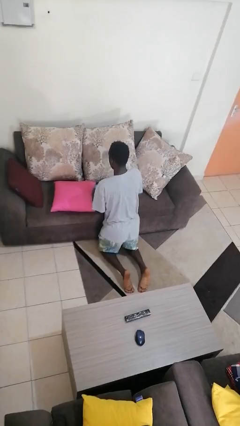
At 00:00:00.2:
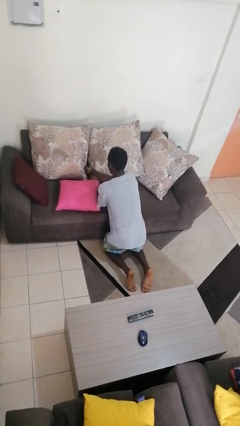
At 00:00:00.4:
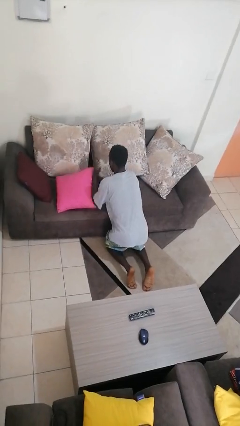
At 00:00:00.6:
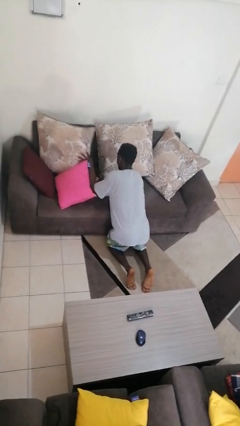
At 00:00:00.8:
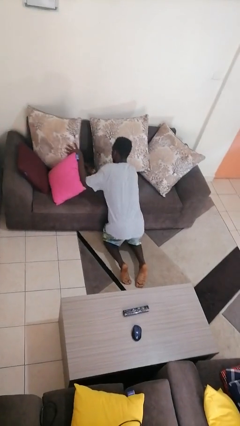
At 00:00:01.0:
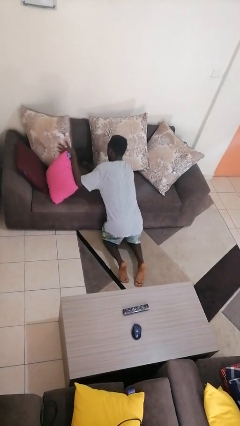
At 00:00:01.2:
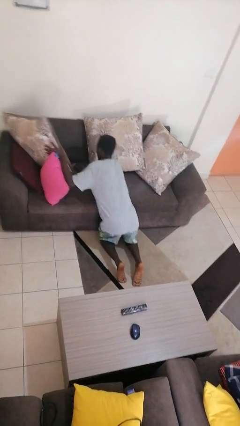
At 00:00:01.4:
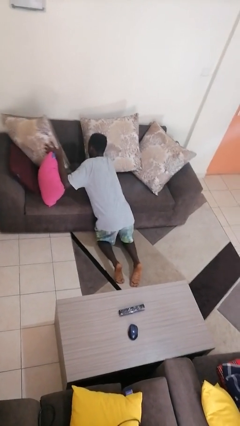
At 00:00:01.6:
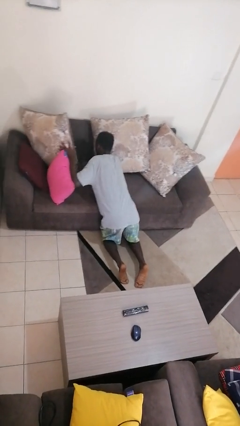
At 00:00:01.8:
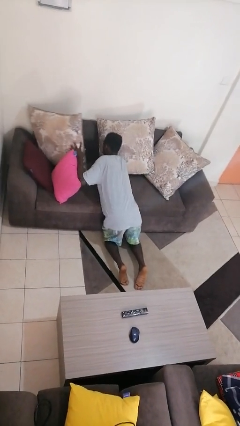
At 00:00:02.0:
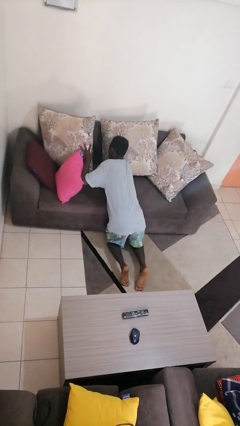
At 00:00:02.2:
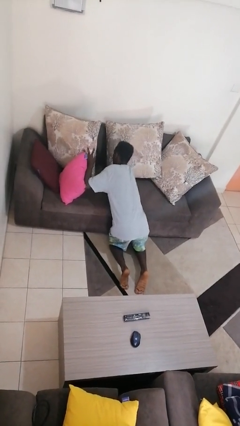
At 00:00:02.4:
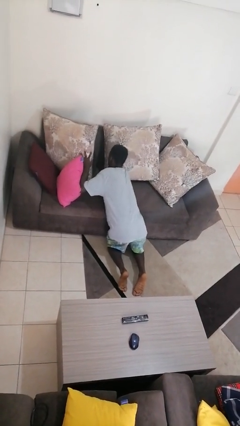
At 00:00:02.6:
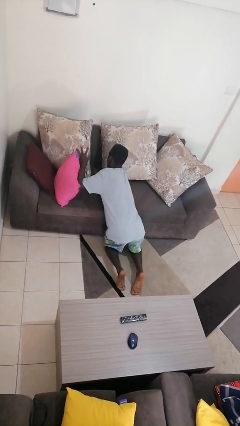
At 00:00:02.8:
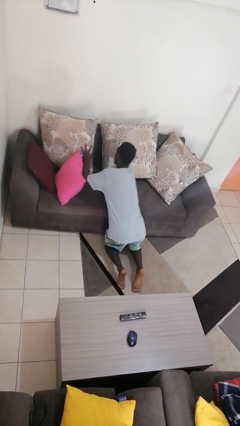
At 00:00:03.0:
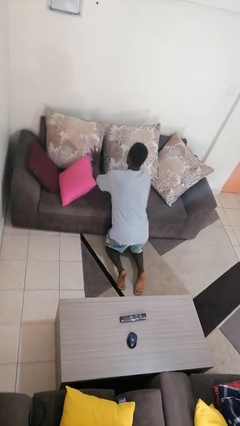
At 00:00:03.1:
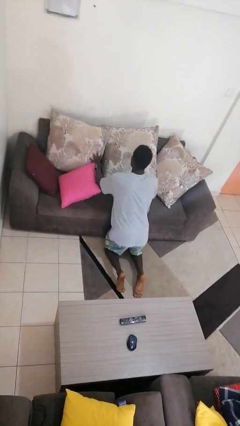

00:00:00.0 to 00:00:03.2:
person searches in couch

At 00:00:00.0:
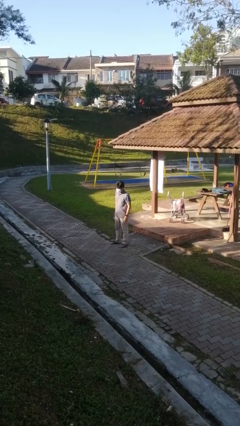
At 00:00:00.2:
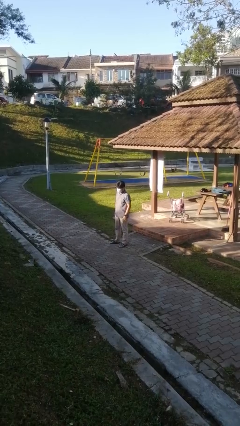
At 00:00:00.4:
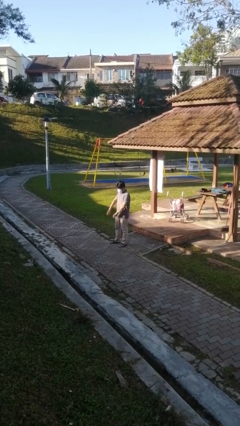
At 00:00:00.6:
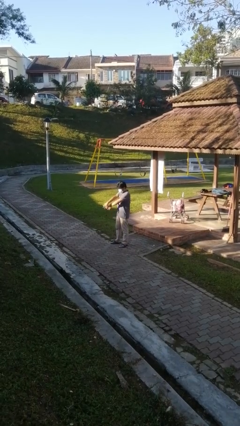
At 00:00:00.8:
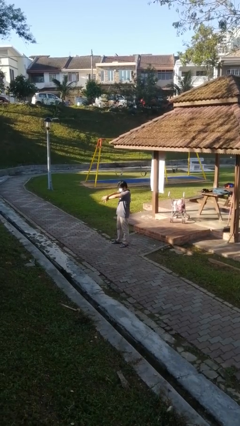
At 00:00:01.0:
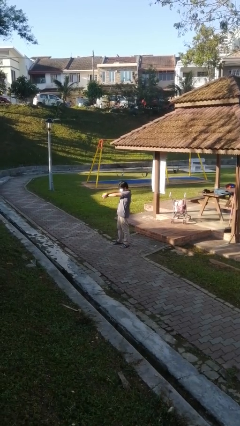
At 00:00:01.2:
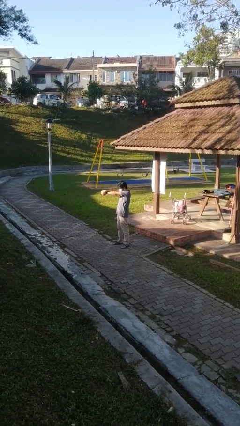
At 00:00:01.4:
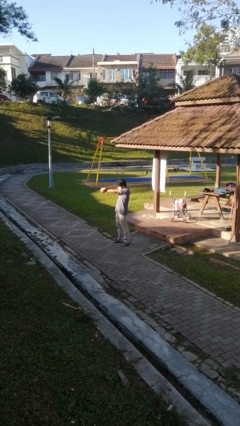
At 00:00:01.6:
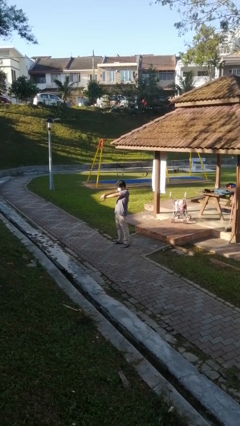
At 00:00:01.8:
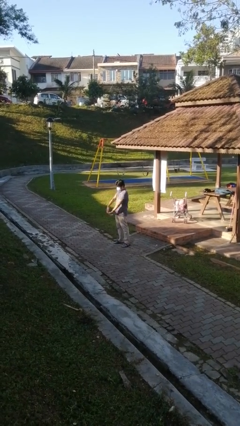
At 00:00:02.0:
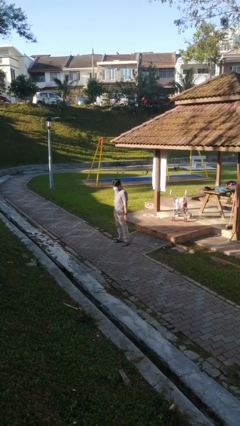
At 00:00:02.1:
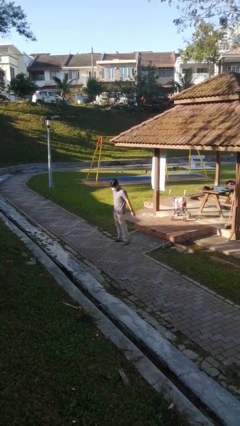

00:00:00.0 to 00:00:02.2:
person crosses arms

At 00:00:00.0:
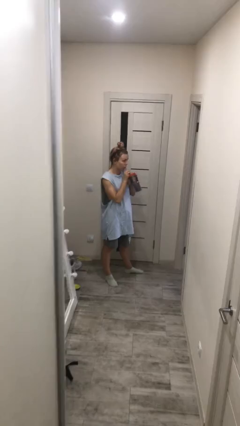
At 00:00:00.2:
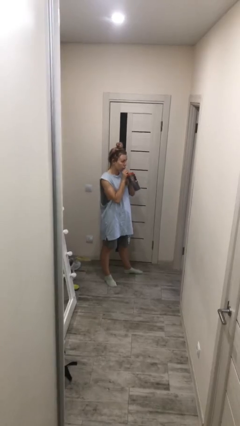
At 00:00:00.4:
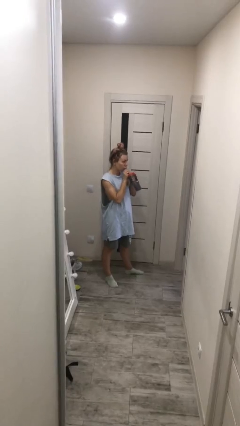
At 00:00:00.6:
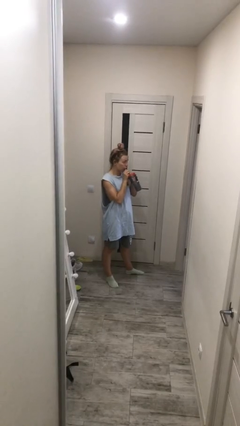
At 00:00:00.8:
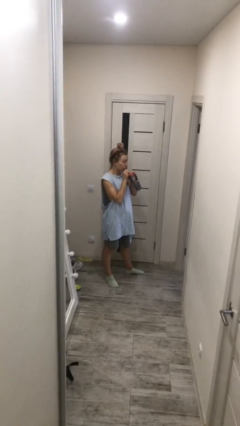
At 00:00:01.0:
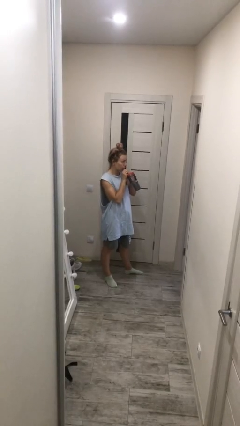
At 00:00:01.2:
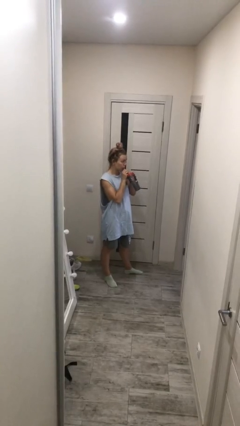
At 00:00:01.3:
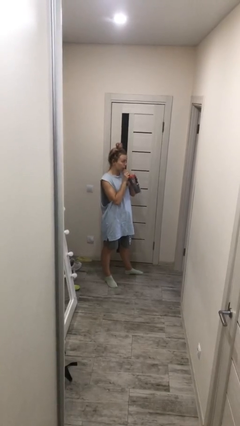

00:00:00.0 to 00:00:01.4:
person drinks from straw

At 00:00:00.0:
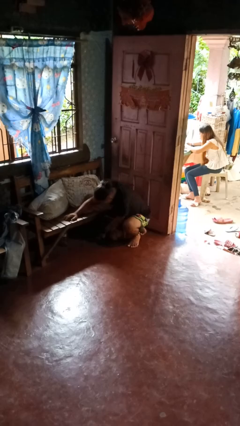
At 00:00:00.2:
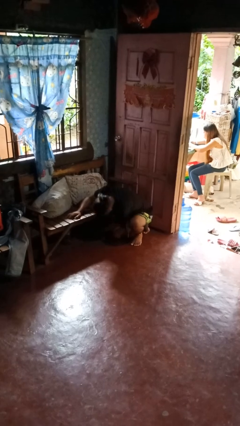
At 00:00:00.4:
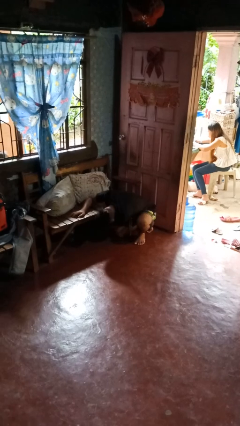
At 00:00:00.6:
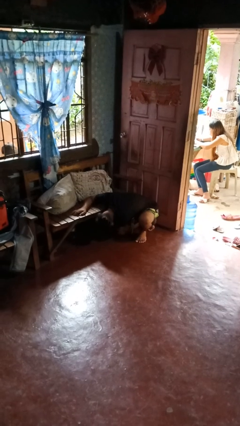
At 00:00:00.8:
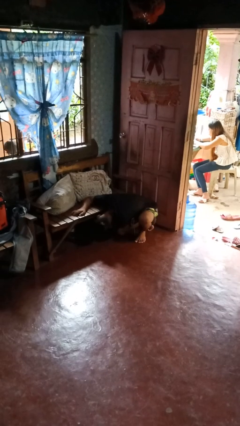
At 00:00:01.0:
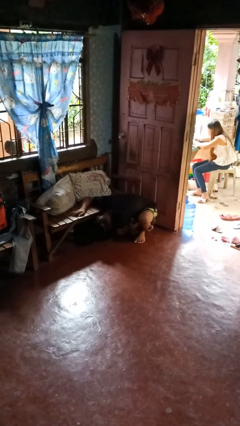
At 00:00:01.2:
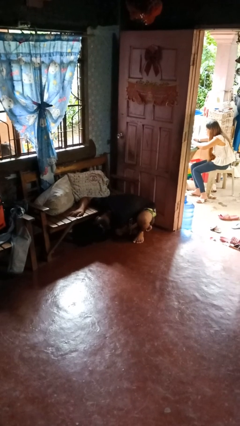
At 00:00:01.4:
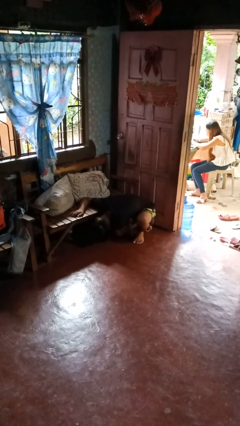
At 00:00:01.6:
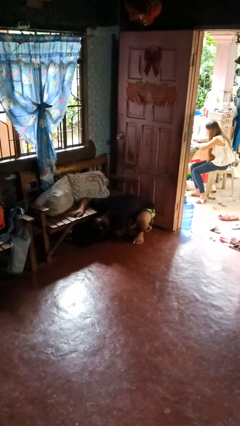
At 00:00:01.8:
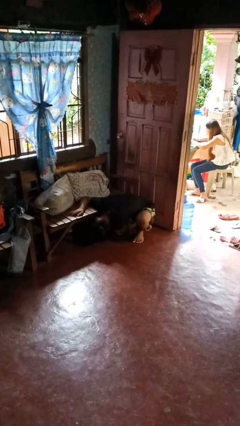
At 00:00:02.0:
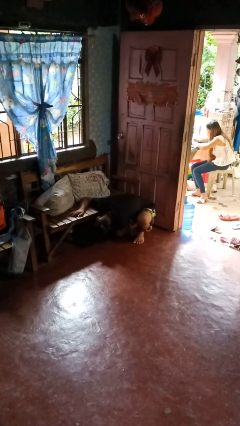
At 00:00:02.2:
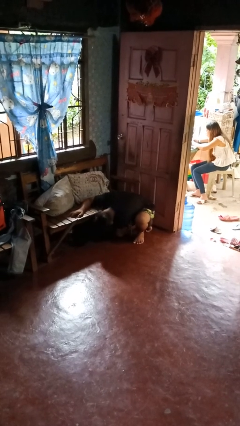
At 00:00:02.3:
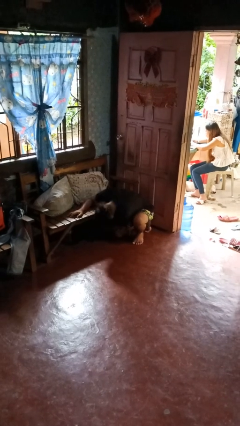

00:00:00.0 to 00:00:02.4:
person searches under couch

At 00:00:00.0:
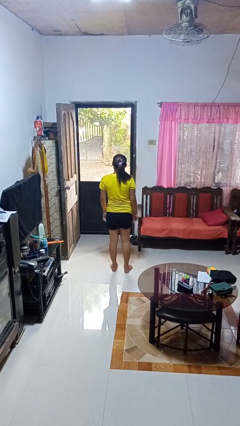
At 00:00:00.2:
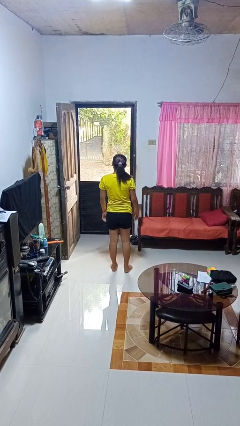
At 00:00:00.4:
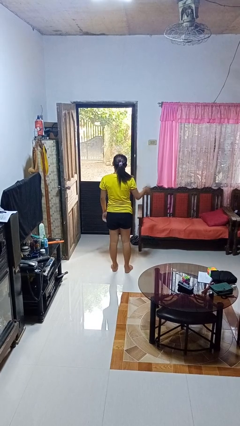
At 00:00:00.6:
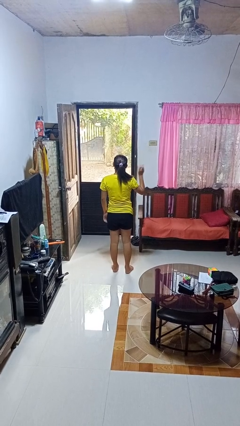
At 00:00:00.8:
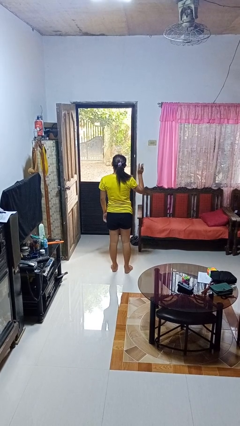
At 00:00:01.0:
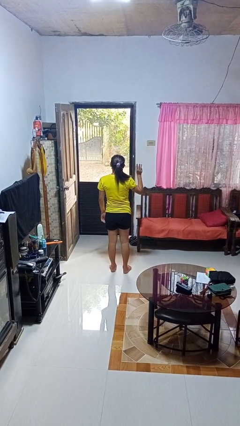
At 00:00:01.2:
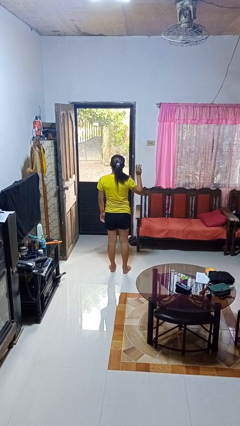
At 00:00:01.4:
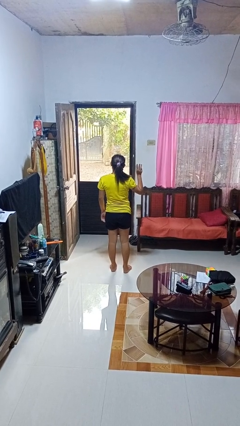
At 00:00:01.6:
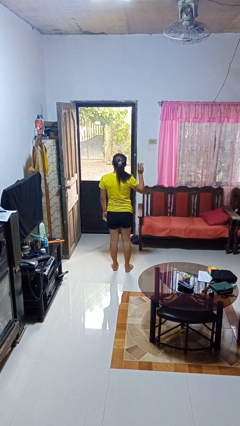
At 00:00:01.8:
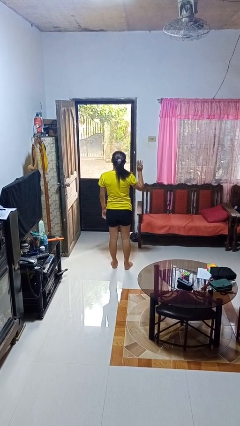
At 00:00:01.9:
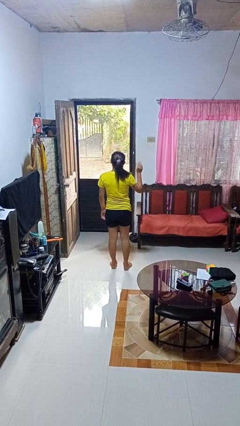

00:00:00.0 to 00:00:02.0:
person gestures number three

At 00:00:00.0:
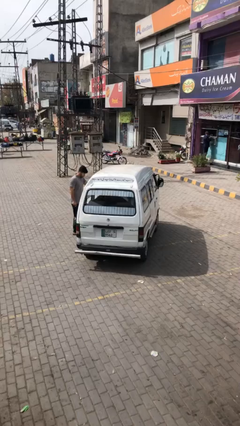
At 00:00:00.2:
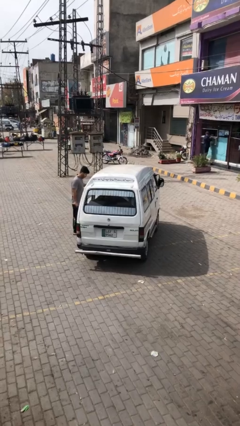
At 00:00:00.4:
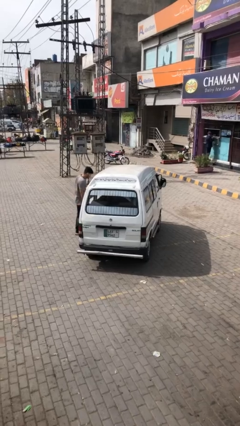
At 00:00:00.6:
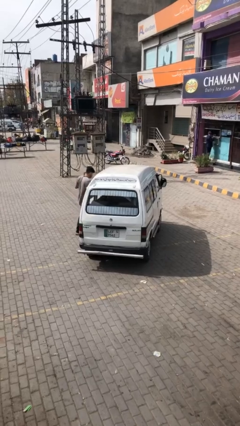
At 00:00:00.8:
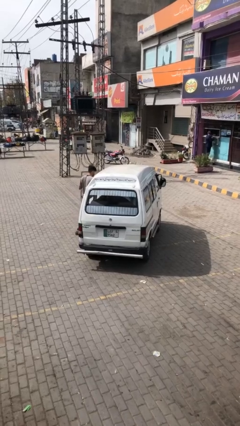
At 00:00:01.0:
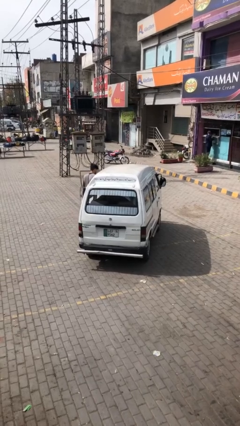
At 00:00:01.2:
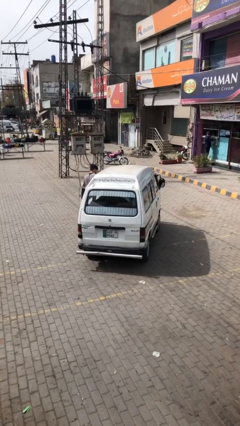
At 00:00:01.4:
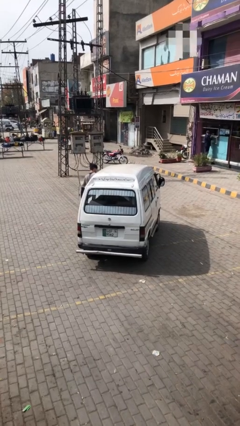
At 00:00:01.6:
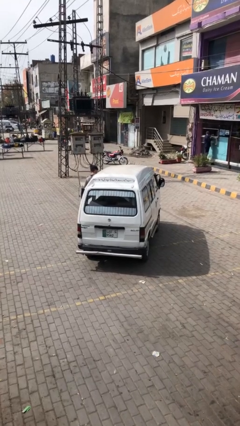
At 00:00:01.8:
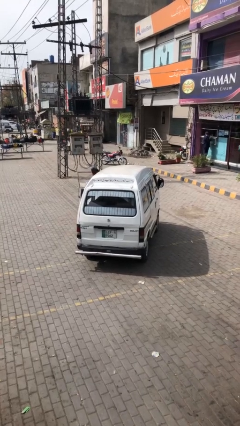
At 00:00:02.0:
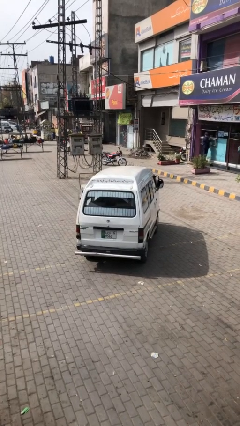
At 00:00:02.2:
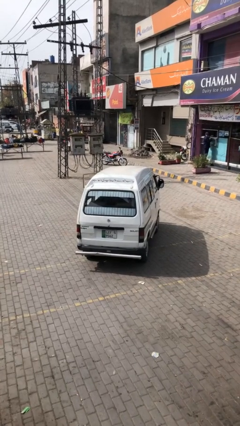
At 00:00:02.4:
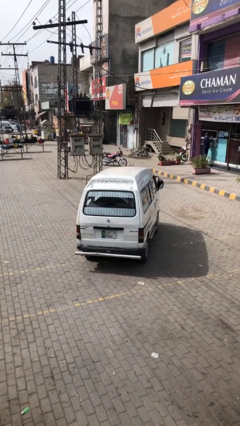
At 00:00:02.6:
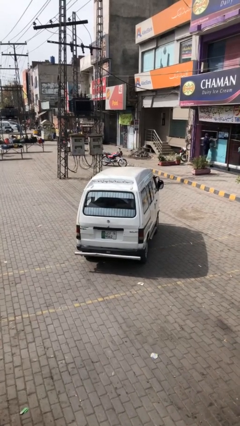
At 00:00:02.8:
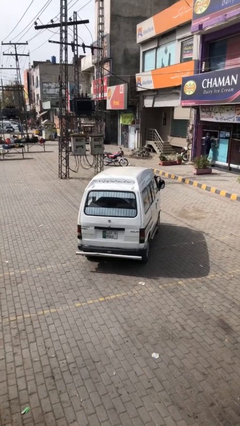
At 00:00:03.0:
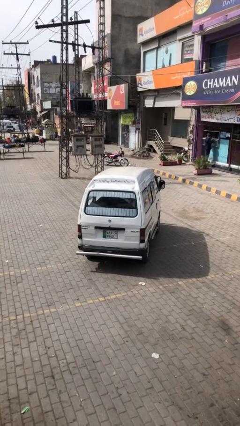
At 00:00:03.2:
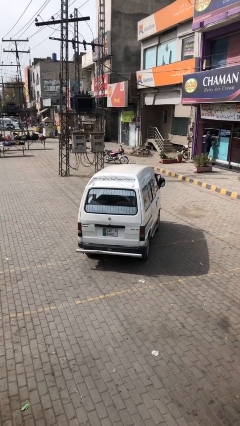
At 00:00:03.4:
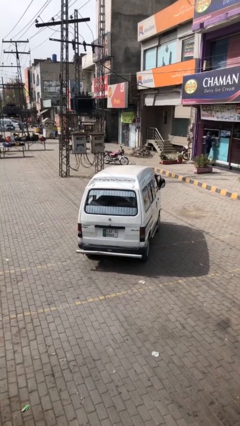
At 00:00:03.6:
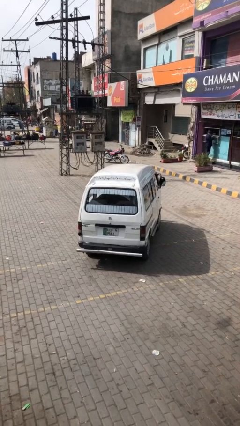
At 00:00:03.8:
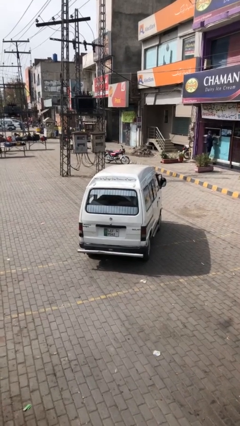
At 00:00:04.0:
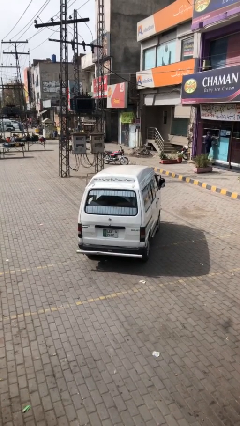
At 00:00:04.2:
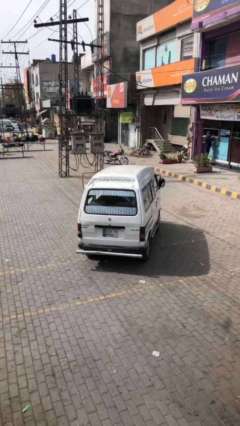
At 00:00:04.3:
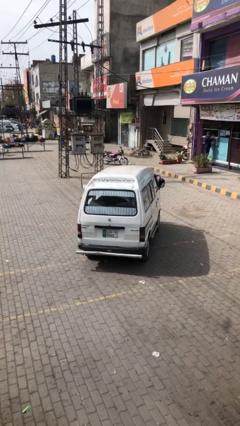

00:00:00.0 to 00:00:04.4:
car picks up person

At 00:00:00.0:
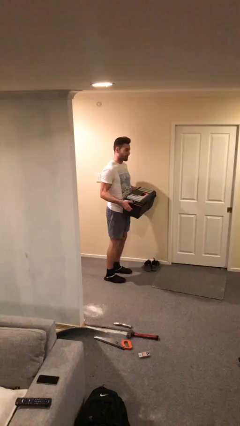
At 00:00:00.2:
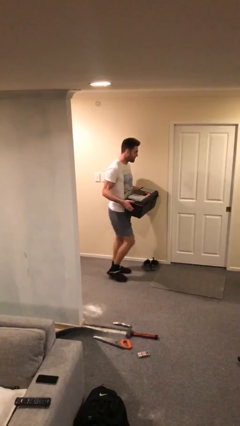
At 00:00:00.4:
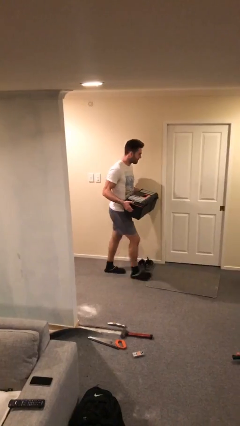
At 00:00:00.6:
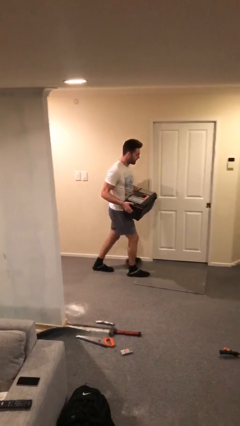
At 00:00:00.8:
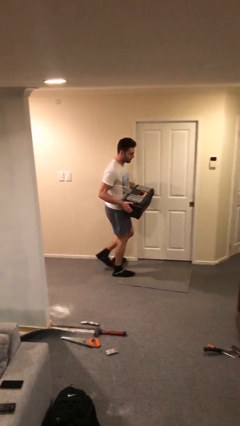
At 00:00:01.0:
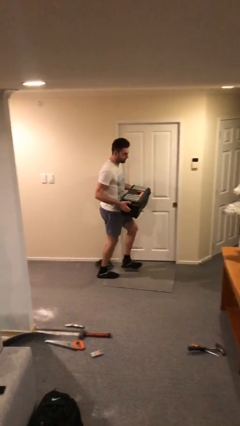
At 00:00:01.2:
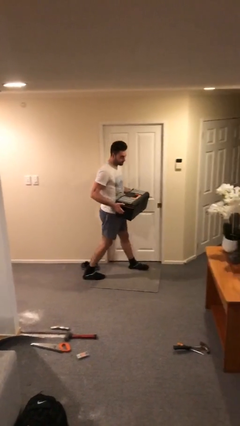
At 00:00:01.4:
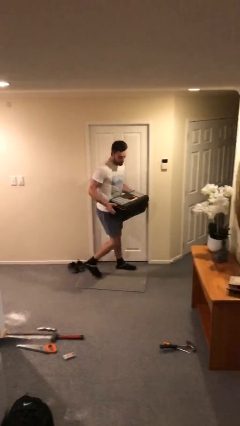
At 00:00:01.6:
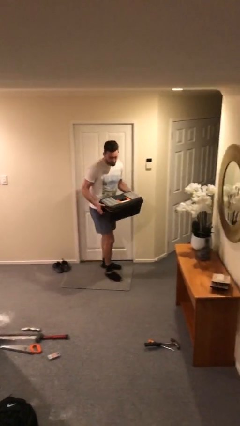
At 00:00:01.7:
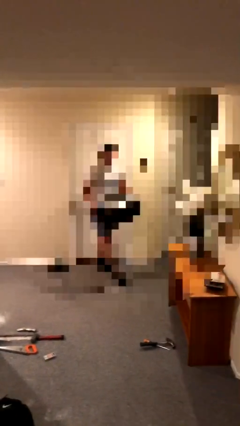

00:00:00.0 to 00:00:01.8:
person carries heavy object
